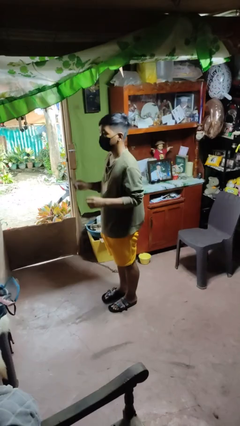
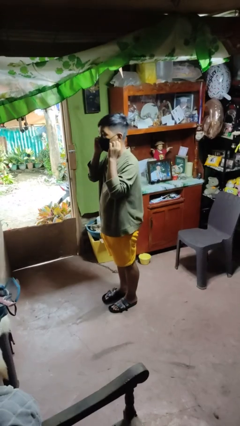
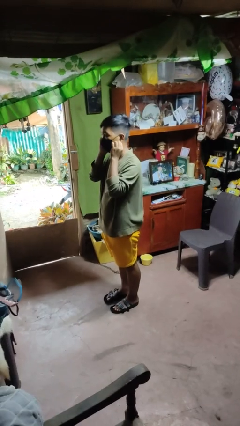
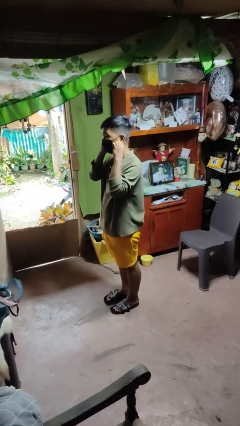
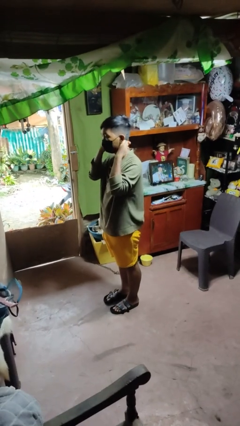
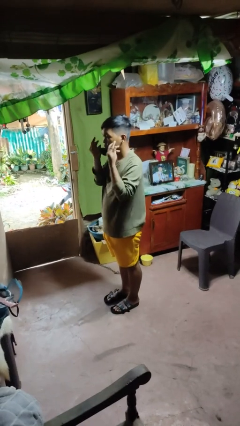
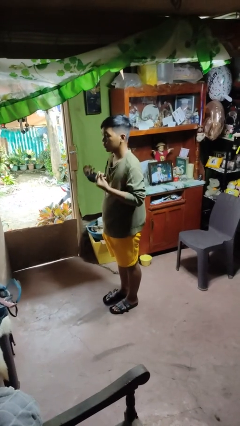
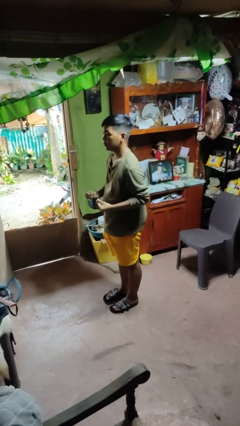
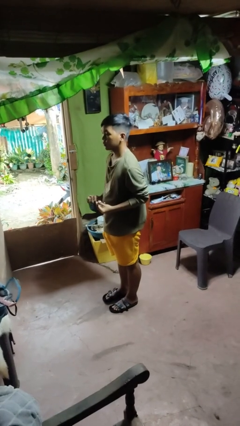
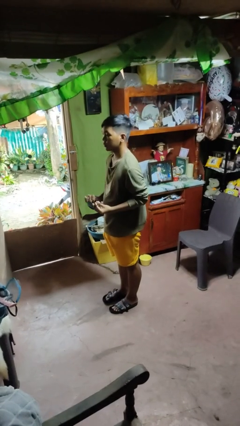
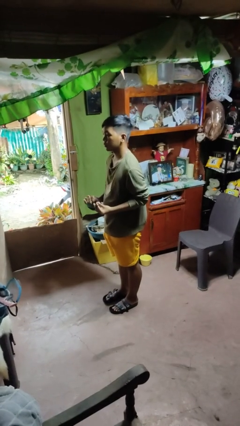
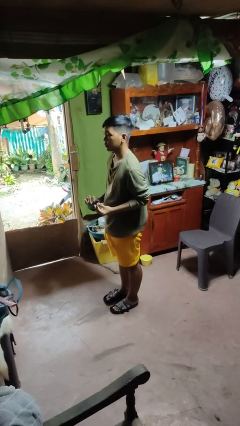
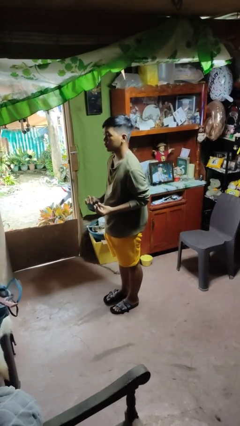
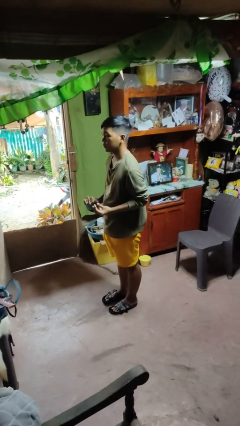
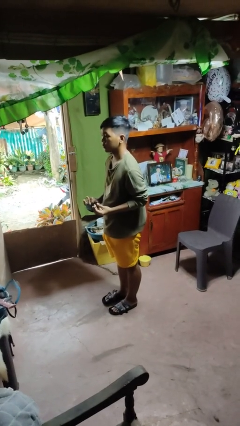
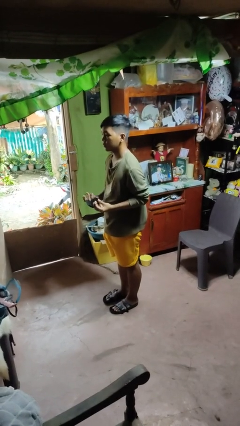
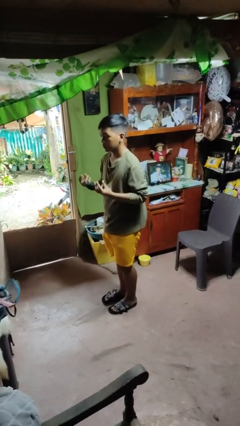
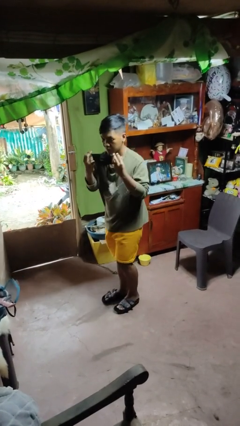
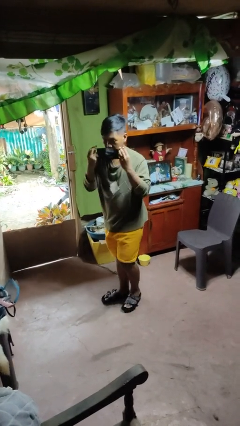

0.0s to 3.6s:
person takes off facemask

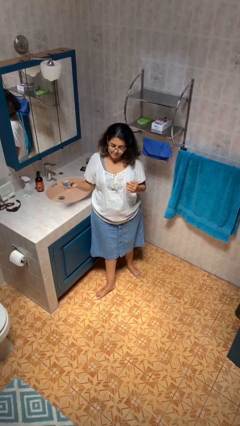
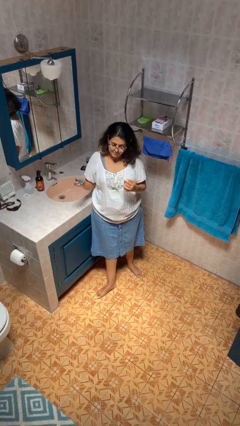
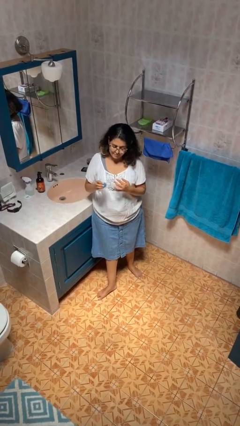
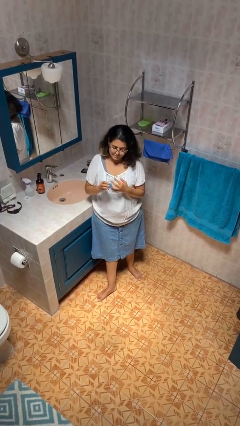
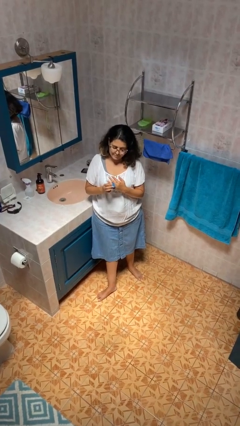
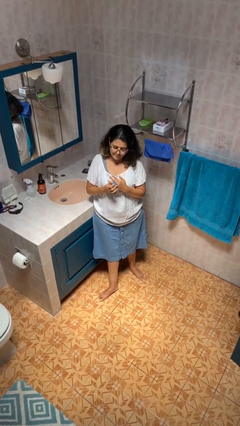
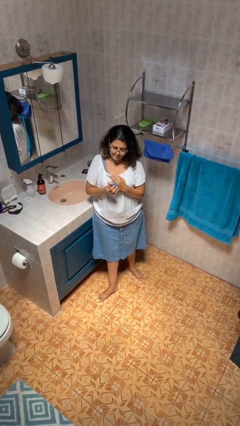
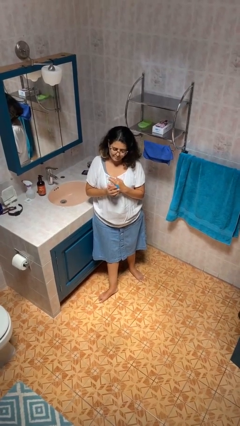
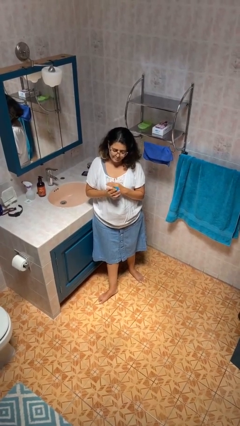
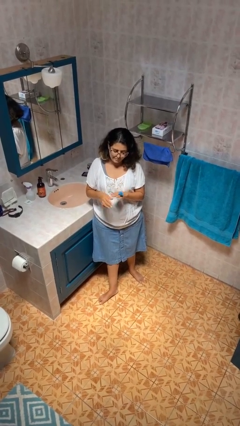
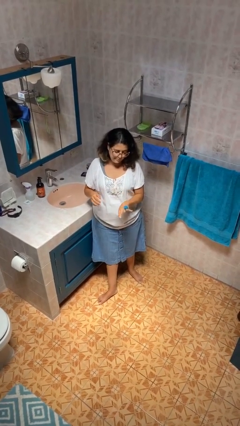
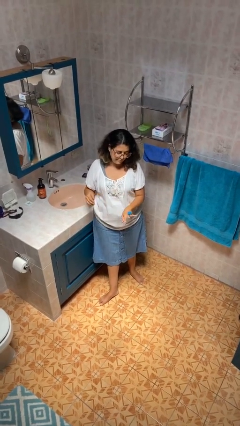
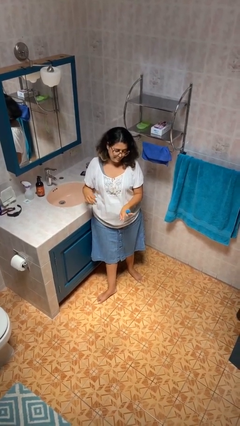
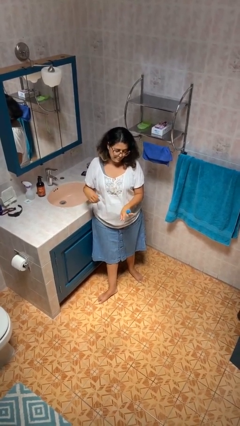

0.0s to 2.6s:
person puts on ring

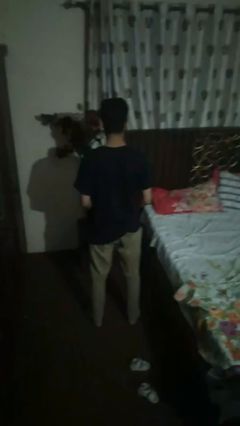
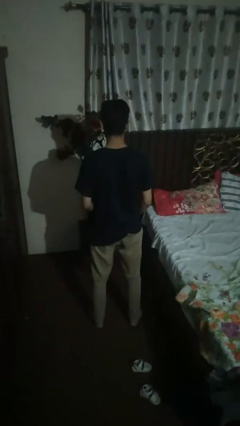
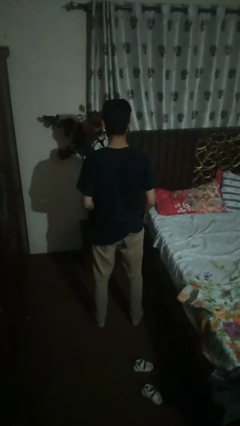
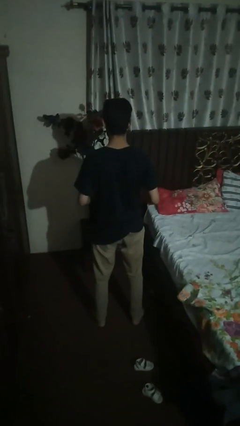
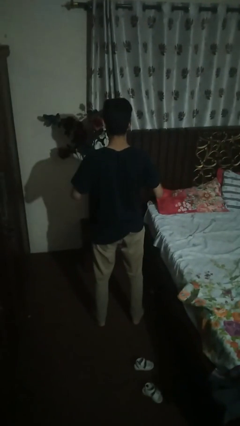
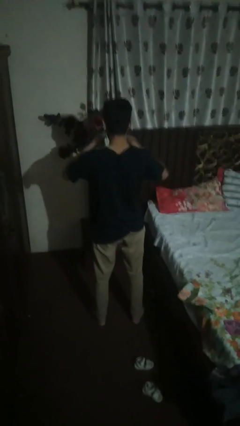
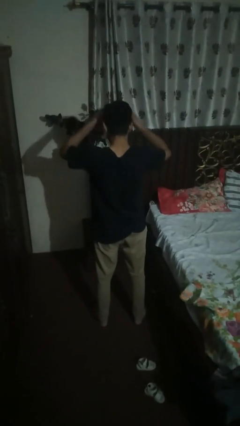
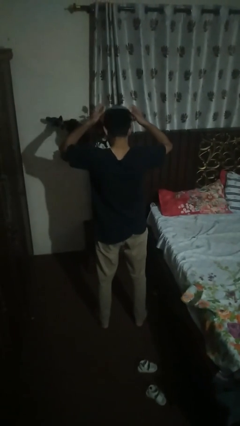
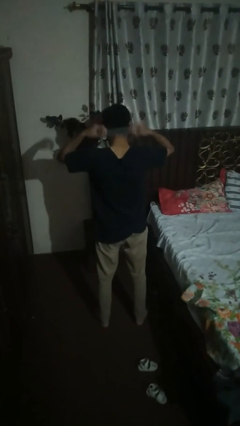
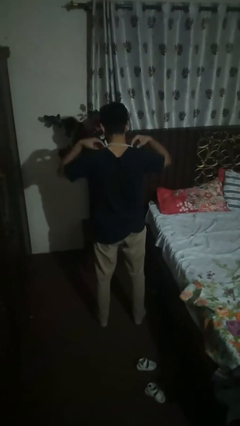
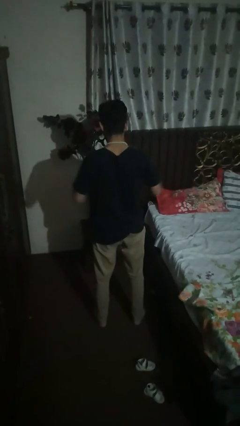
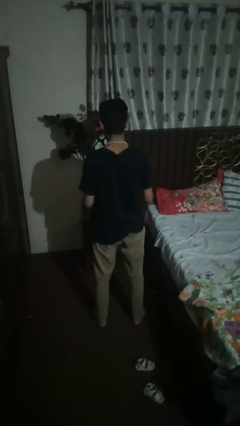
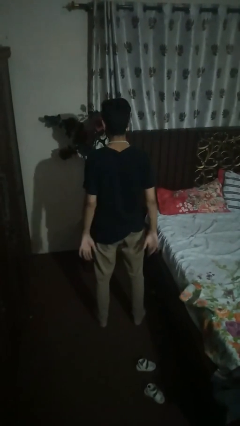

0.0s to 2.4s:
person puts on necklace

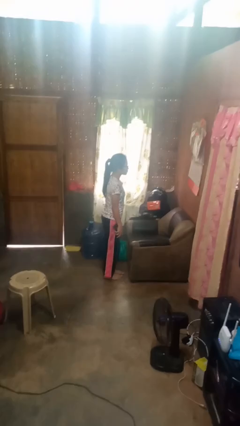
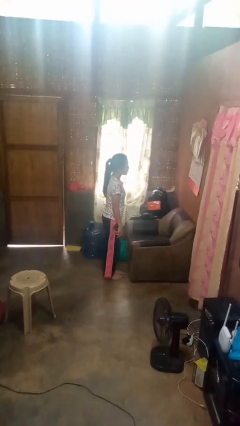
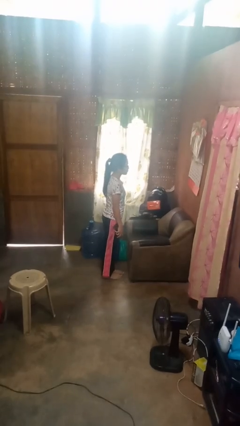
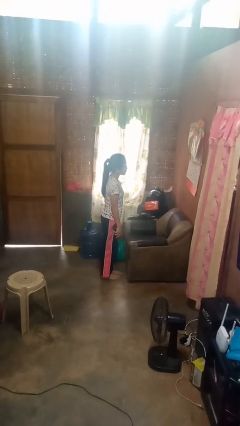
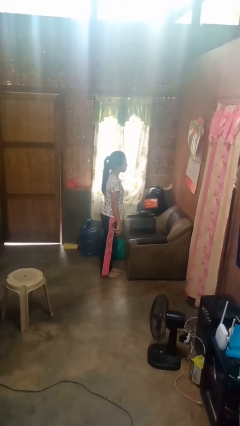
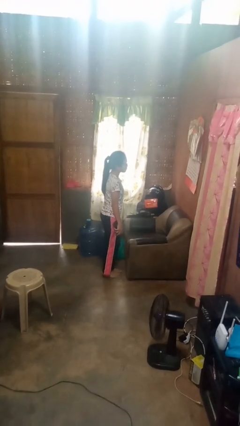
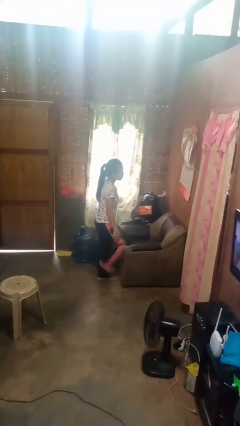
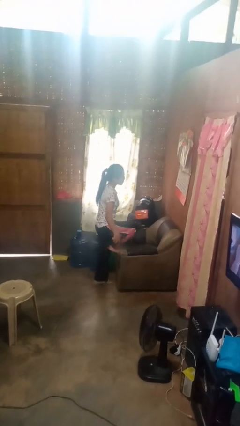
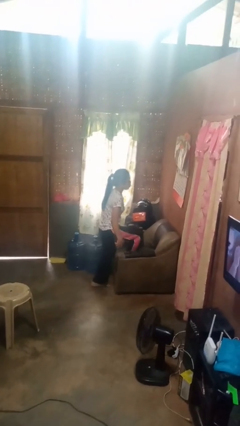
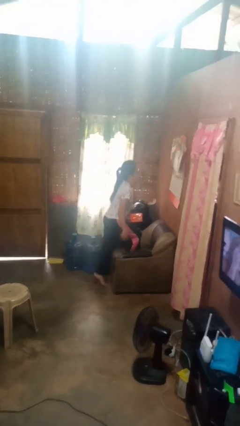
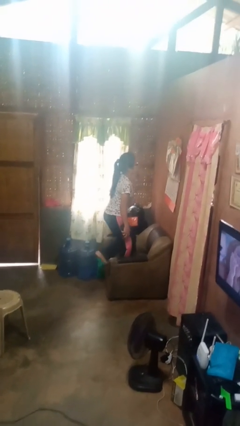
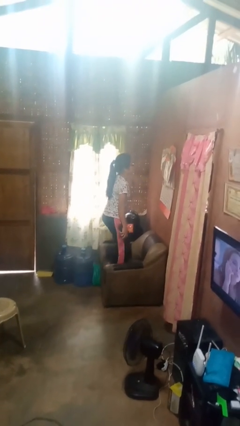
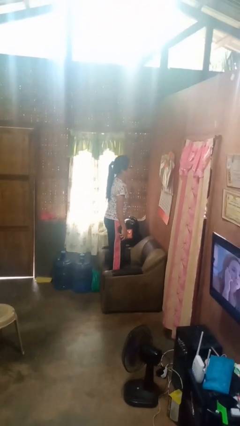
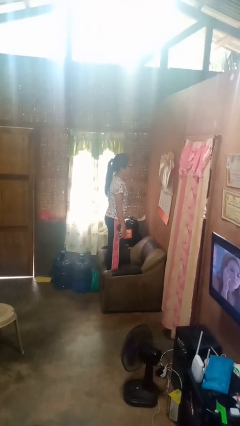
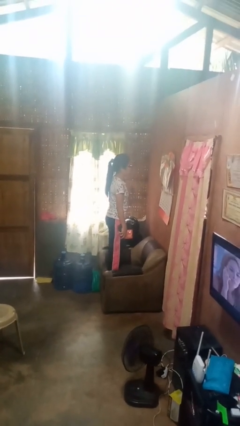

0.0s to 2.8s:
person climbs on couch

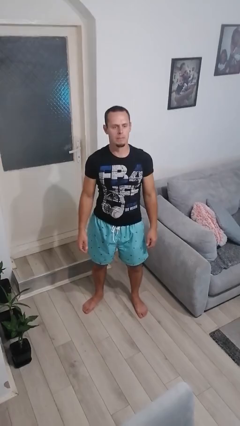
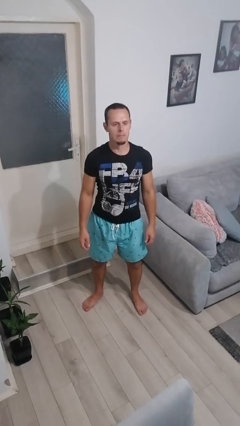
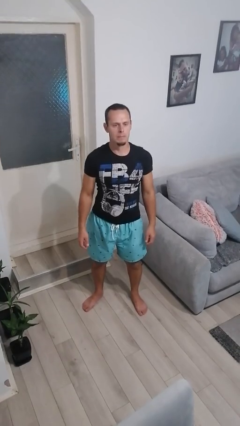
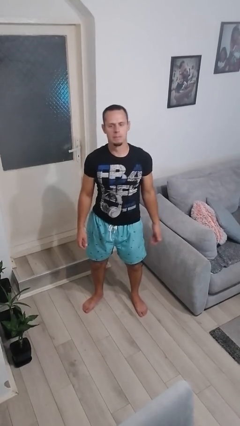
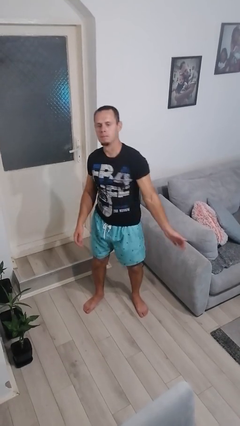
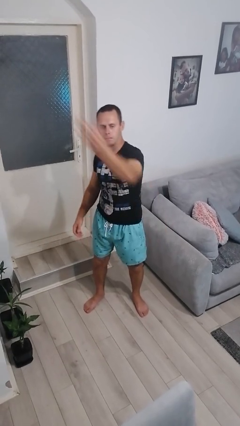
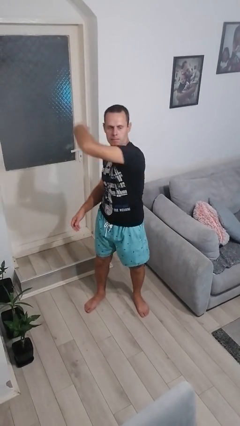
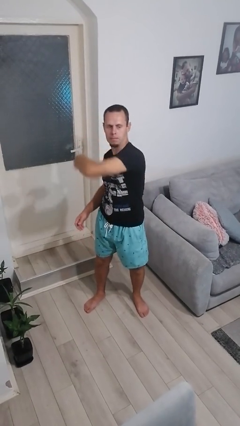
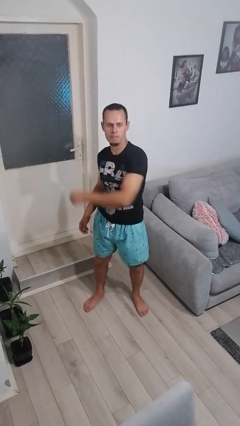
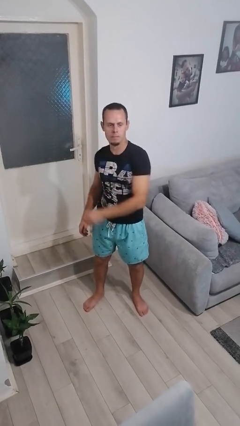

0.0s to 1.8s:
person punches

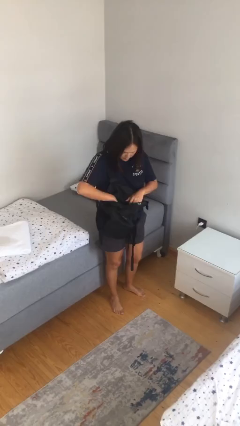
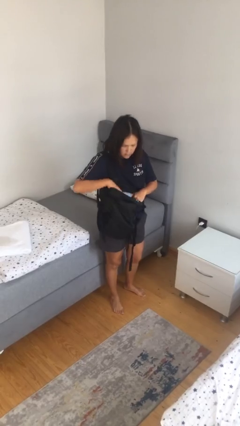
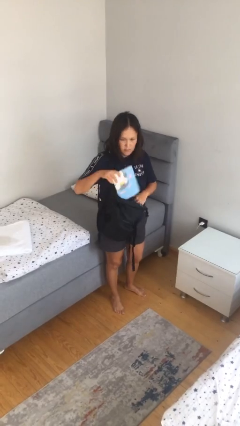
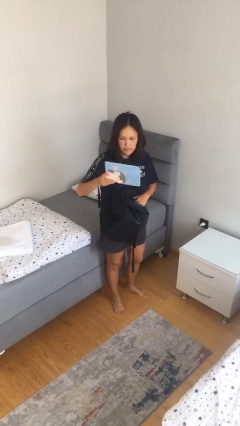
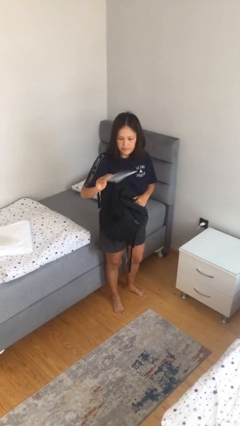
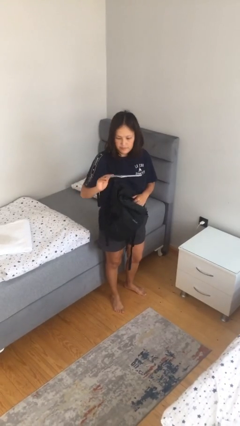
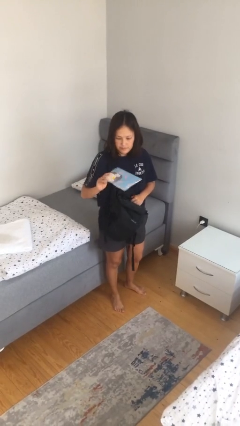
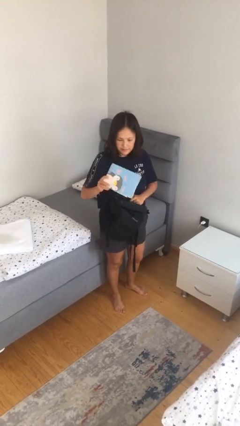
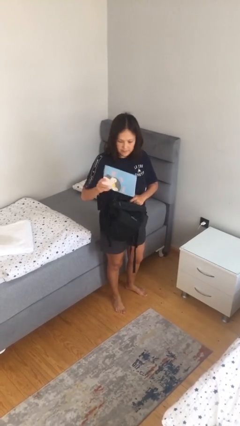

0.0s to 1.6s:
person takes object from backpack

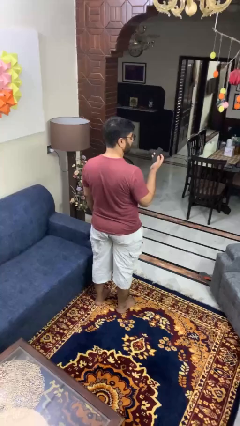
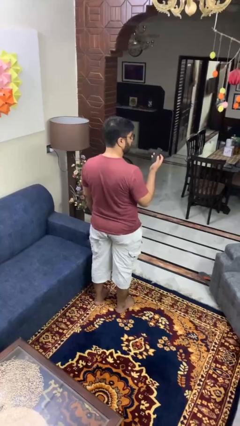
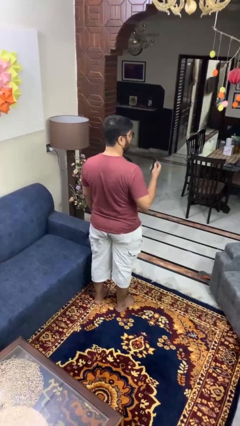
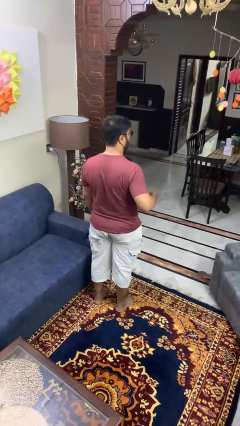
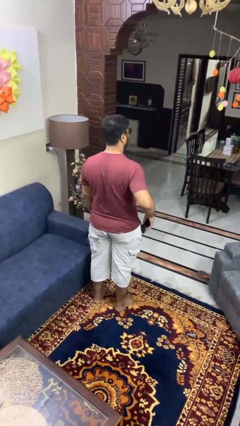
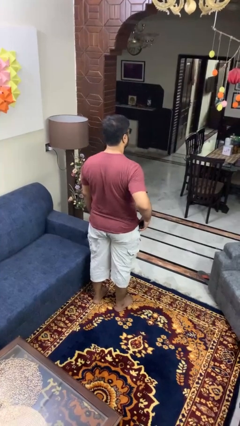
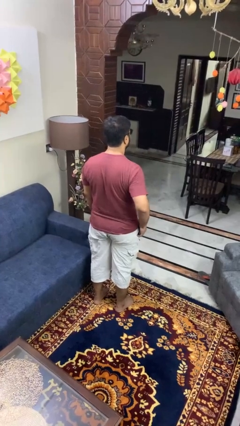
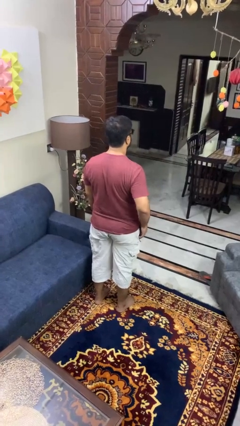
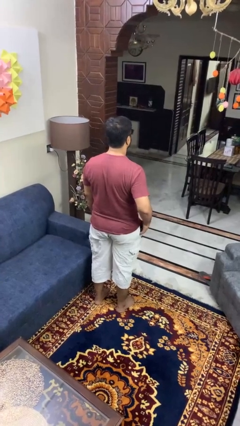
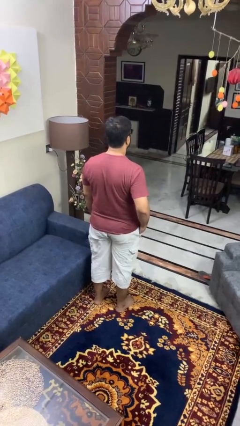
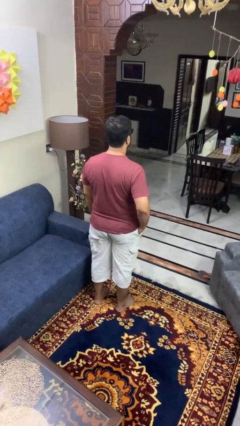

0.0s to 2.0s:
person puts phone into pocket
